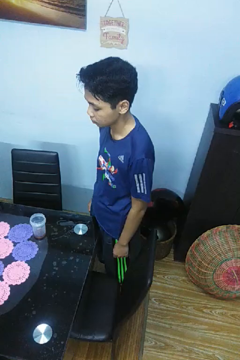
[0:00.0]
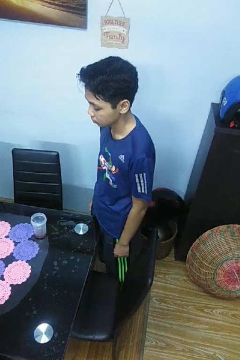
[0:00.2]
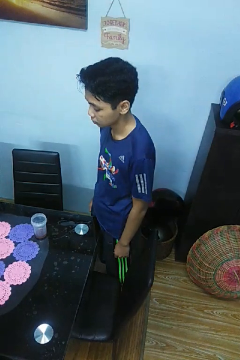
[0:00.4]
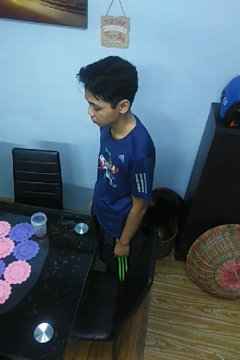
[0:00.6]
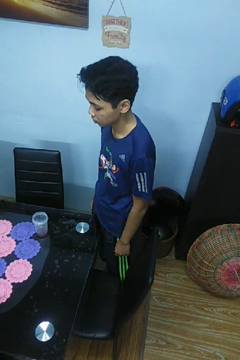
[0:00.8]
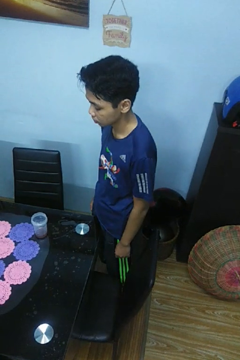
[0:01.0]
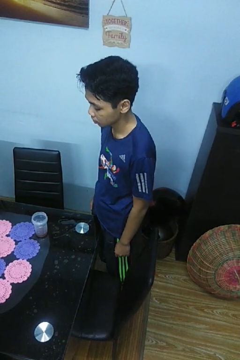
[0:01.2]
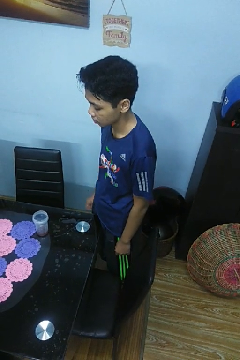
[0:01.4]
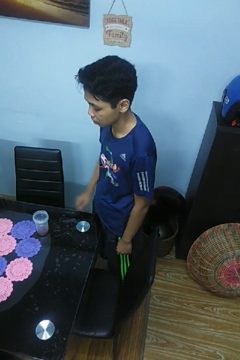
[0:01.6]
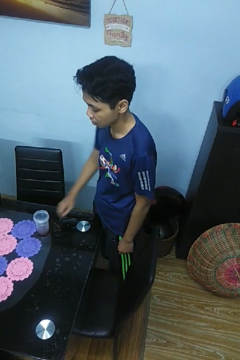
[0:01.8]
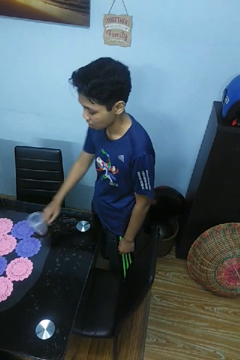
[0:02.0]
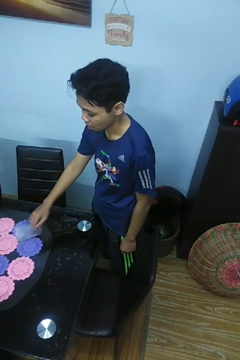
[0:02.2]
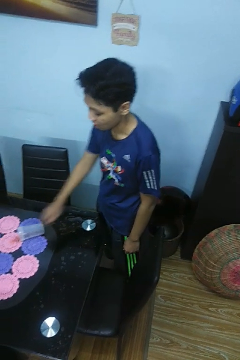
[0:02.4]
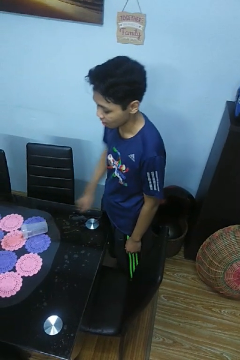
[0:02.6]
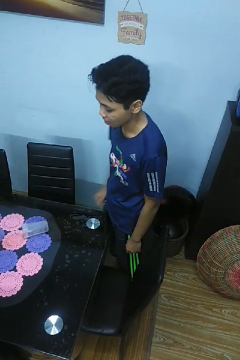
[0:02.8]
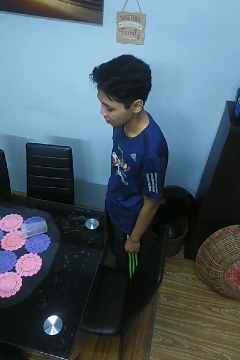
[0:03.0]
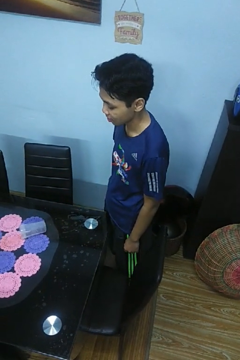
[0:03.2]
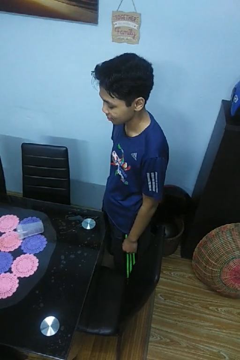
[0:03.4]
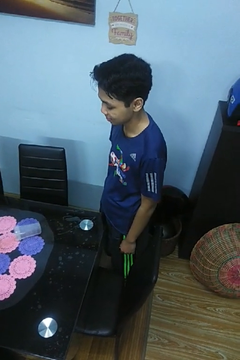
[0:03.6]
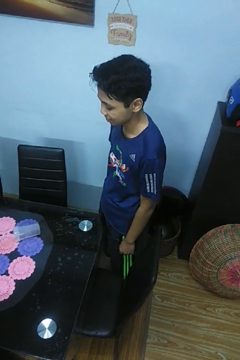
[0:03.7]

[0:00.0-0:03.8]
person spills on table

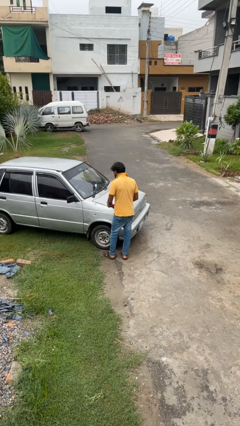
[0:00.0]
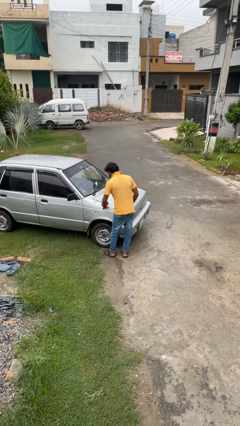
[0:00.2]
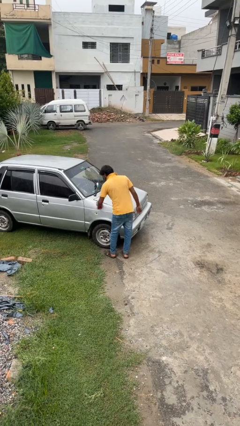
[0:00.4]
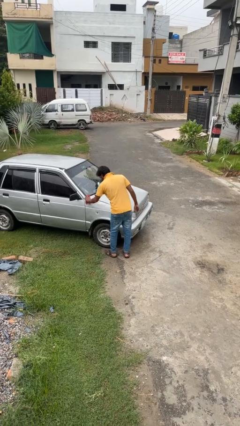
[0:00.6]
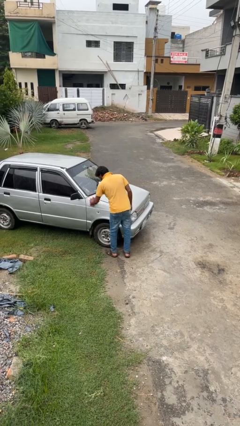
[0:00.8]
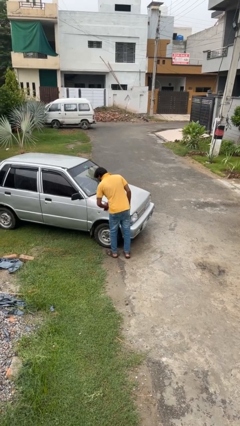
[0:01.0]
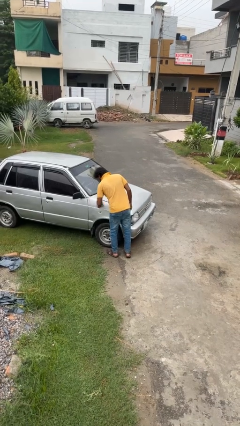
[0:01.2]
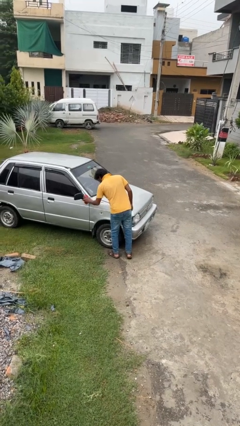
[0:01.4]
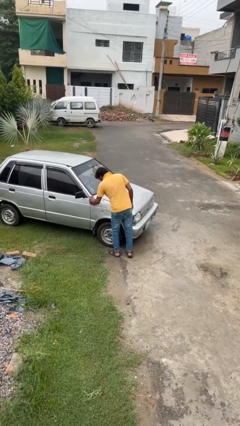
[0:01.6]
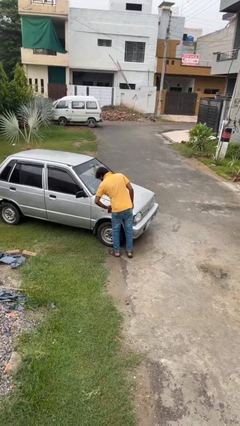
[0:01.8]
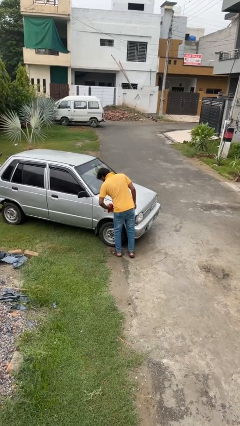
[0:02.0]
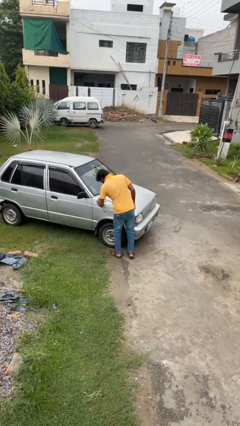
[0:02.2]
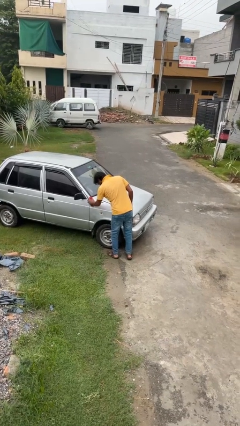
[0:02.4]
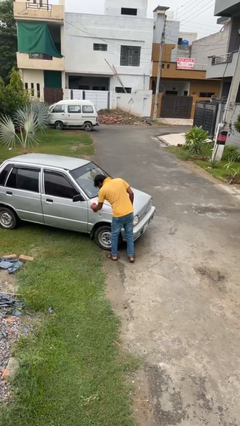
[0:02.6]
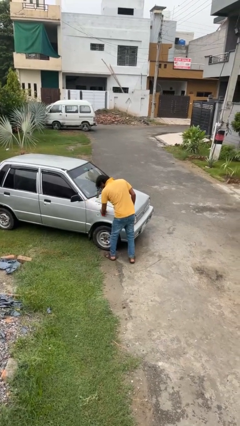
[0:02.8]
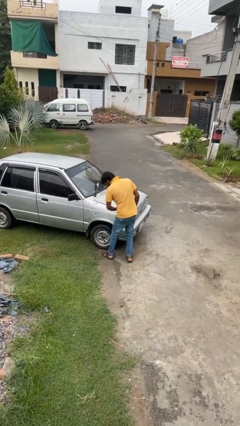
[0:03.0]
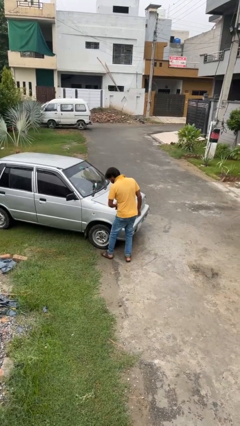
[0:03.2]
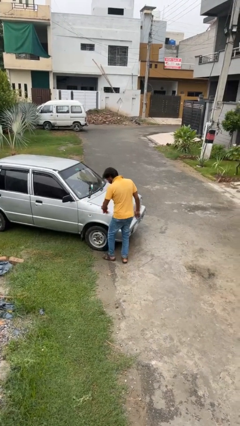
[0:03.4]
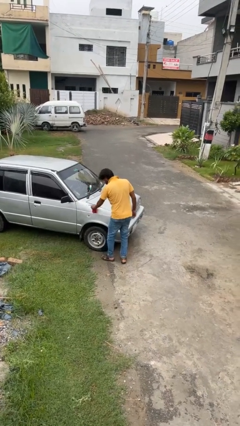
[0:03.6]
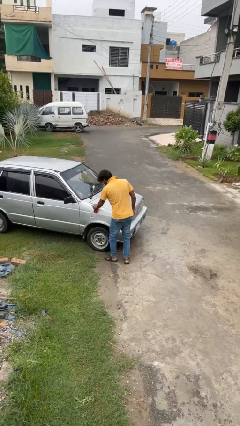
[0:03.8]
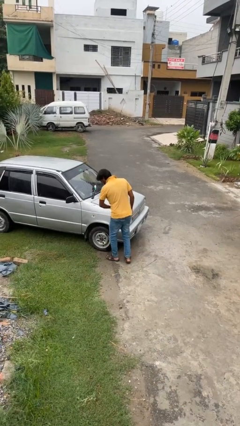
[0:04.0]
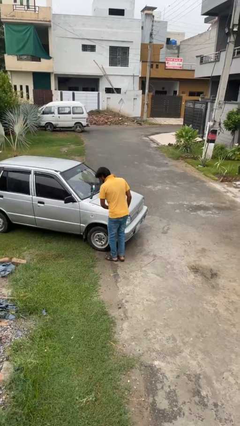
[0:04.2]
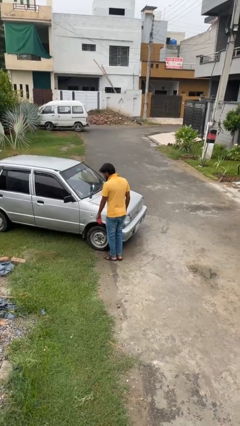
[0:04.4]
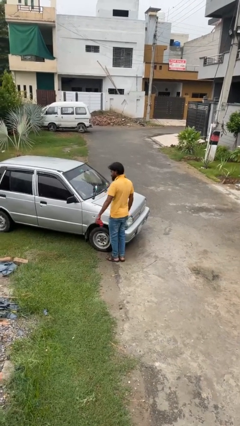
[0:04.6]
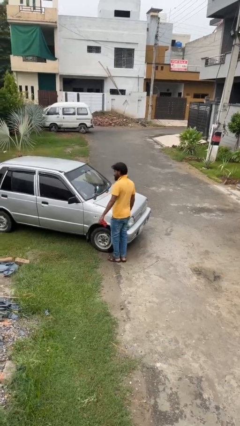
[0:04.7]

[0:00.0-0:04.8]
person polishes car with rag

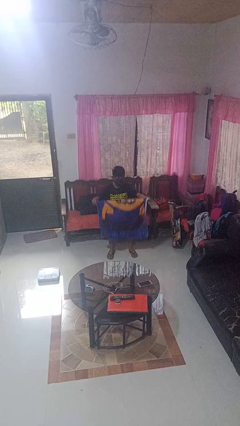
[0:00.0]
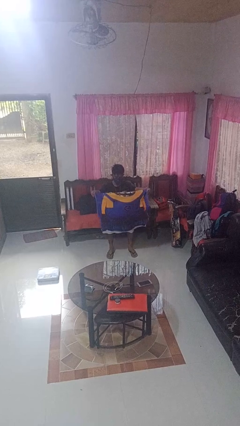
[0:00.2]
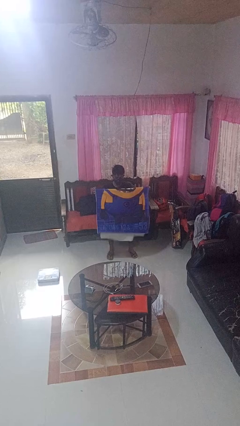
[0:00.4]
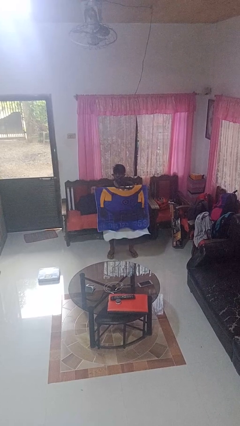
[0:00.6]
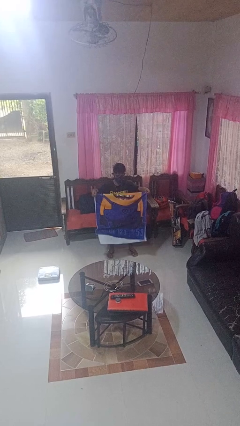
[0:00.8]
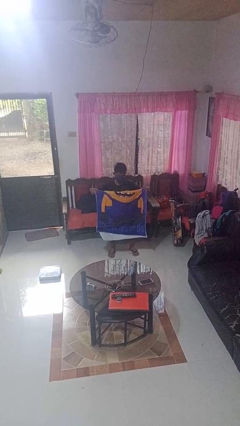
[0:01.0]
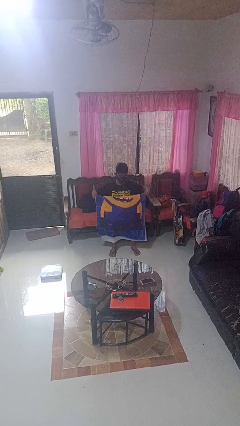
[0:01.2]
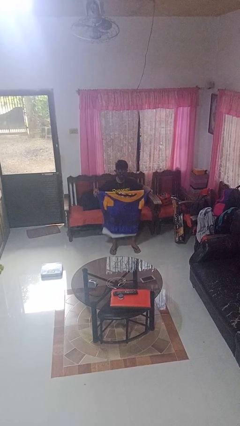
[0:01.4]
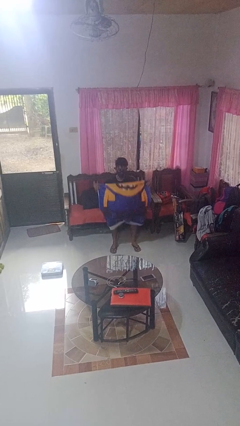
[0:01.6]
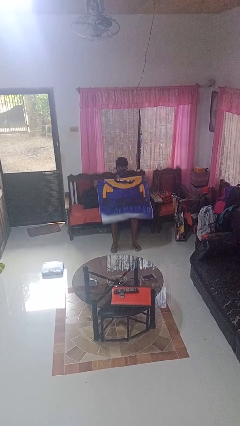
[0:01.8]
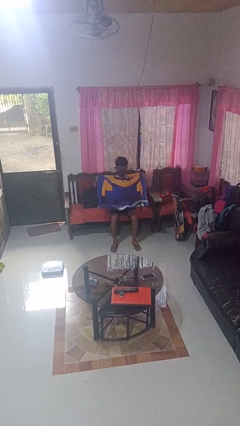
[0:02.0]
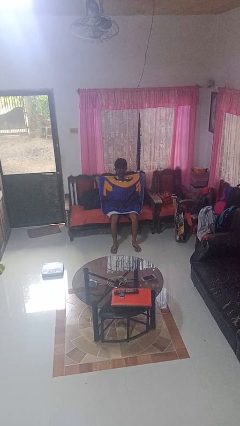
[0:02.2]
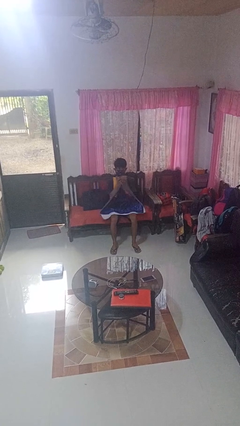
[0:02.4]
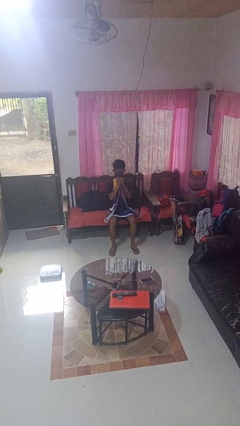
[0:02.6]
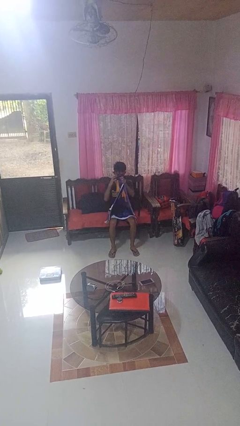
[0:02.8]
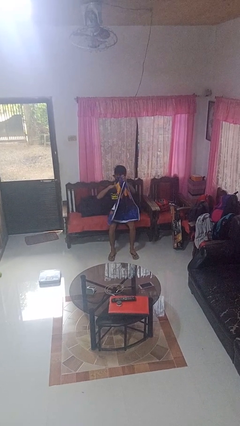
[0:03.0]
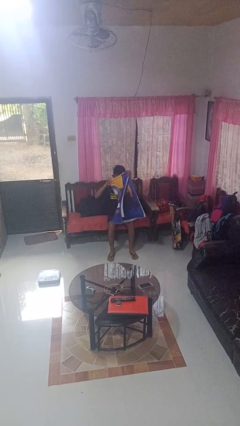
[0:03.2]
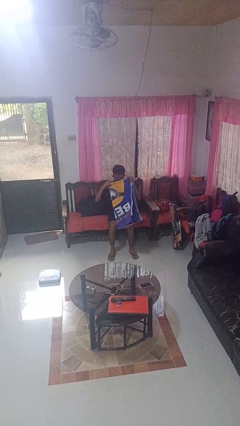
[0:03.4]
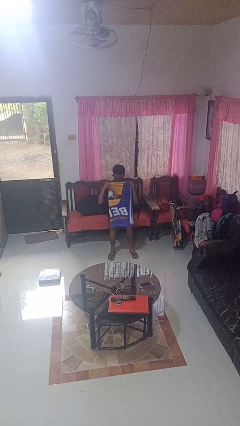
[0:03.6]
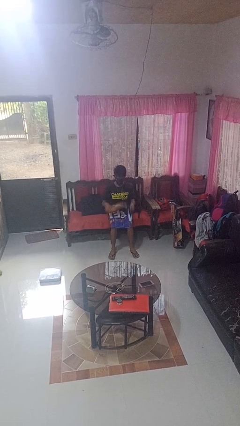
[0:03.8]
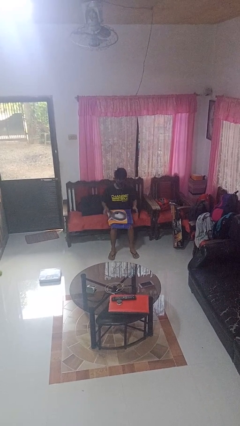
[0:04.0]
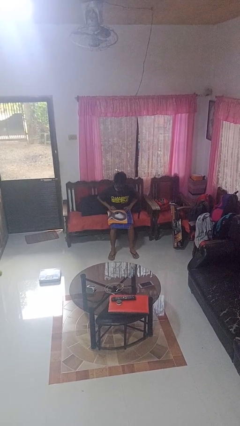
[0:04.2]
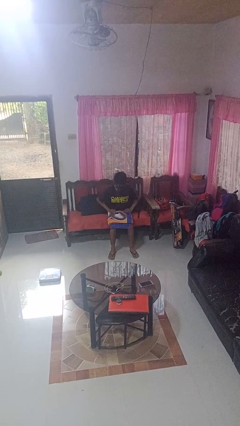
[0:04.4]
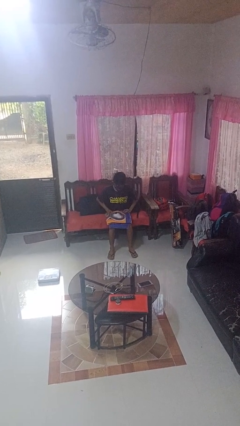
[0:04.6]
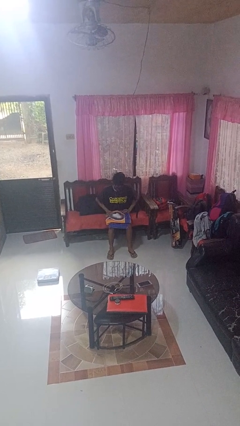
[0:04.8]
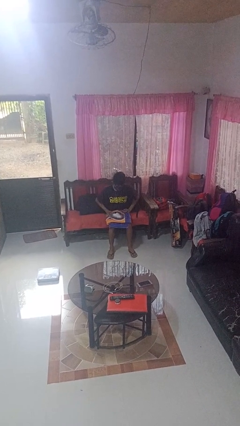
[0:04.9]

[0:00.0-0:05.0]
person folds towel

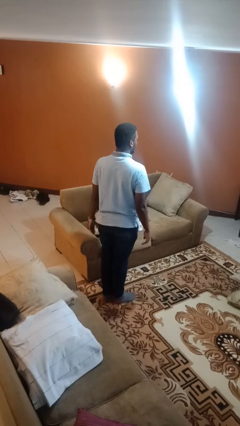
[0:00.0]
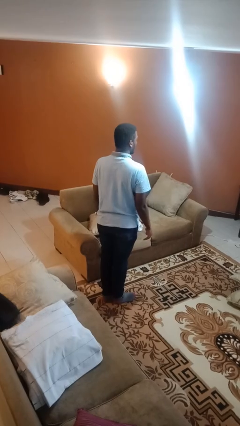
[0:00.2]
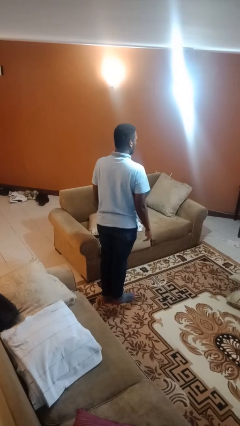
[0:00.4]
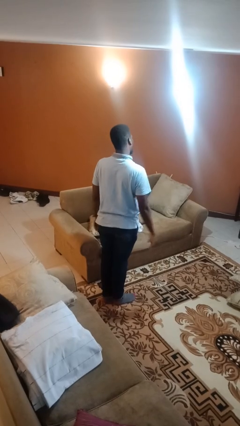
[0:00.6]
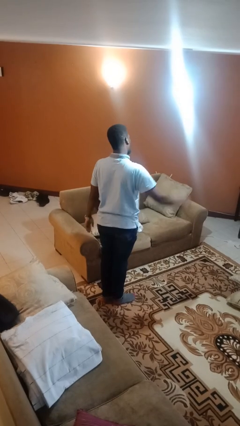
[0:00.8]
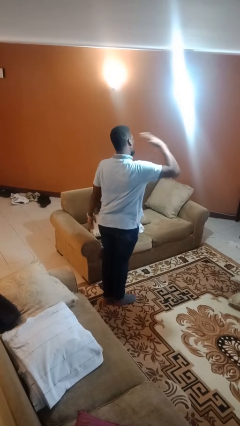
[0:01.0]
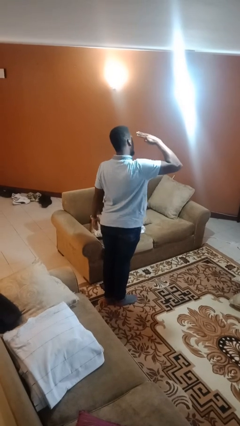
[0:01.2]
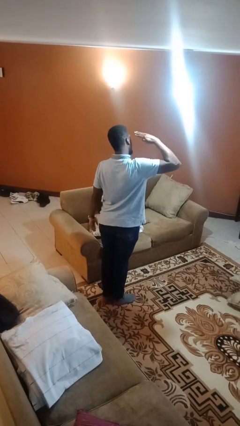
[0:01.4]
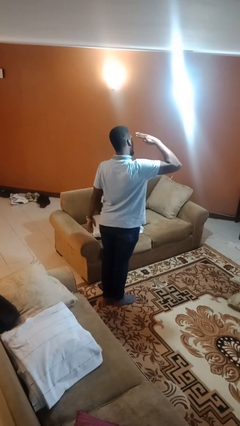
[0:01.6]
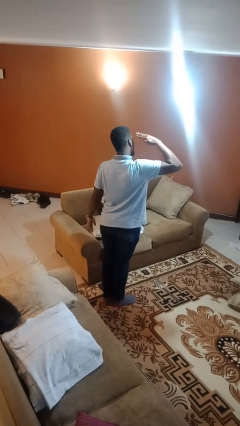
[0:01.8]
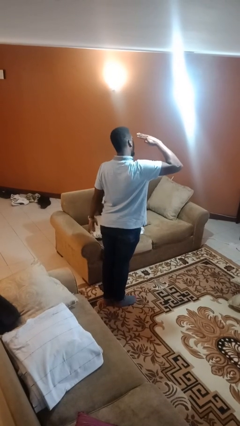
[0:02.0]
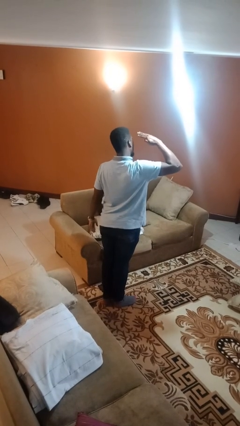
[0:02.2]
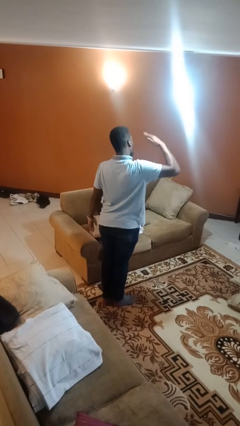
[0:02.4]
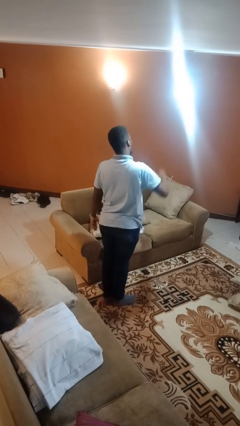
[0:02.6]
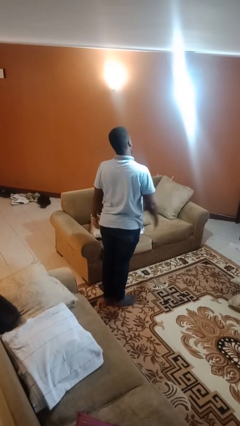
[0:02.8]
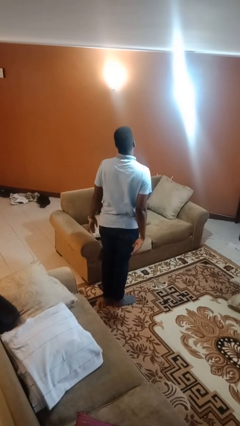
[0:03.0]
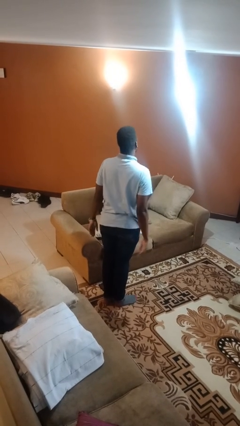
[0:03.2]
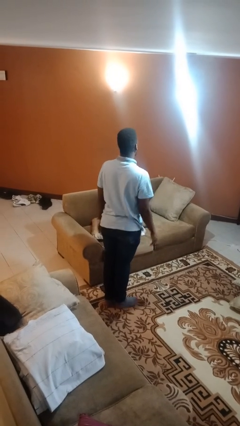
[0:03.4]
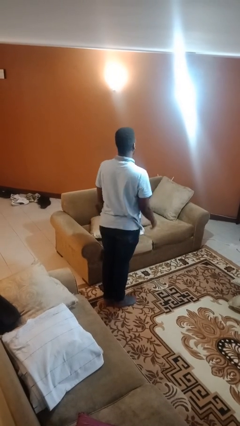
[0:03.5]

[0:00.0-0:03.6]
person salutes

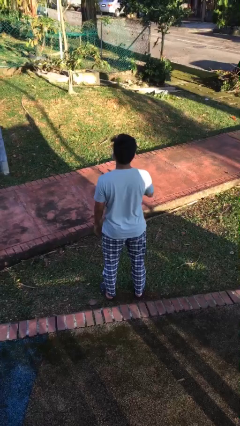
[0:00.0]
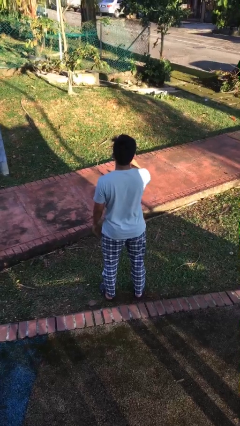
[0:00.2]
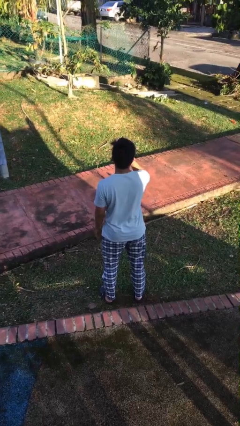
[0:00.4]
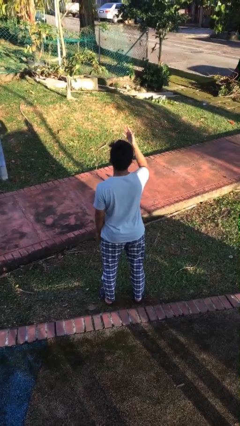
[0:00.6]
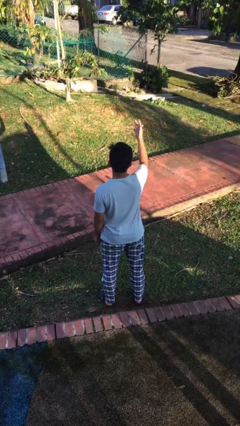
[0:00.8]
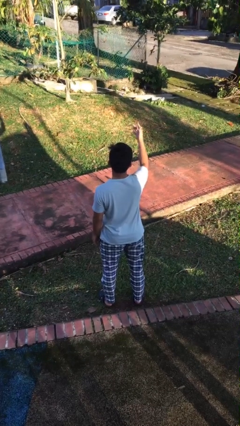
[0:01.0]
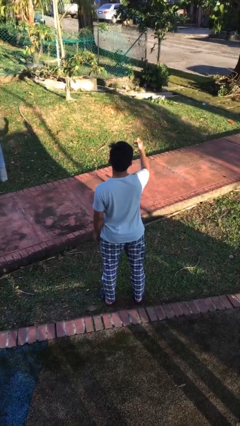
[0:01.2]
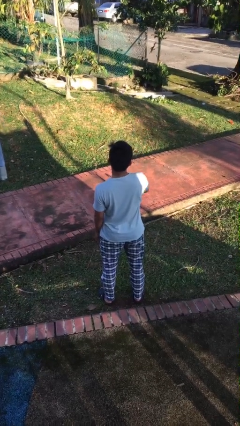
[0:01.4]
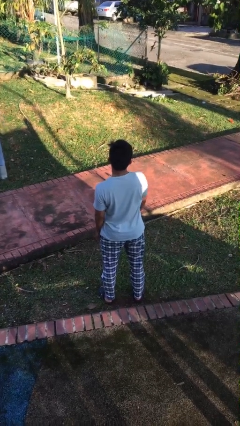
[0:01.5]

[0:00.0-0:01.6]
person gestures blow kiss
